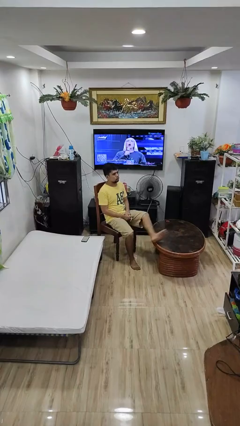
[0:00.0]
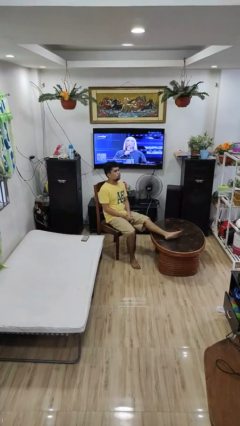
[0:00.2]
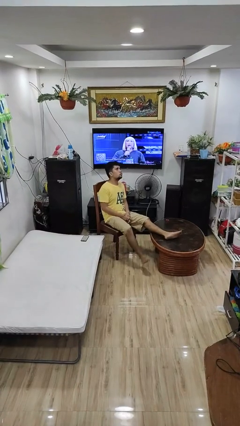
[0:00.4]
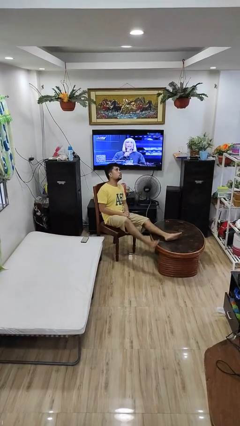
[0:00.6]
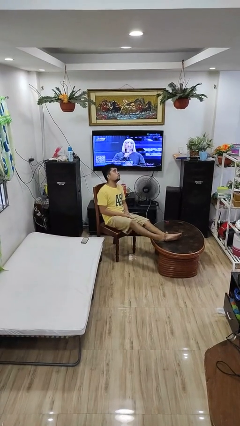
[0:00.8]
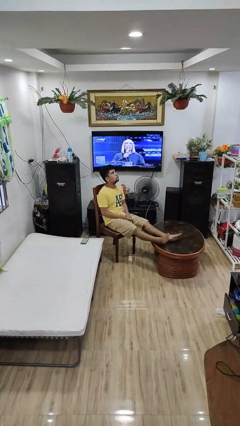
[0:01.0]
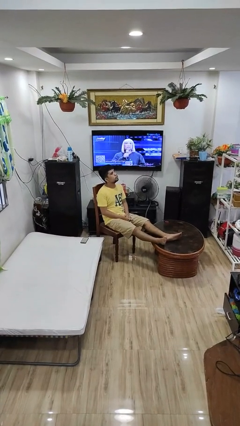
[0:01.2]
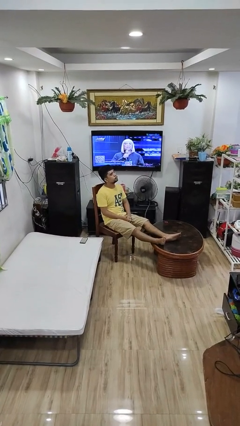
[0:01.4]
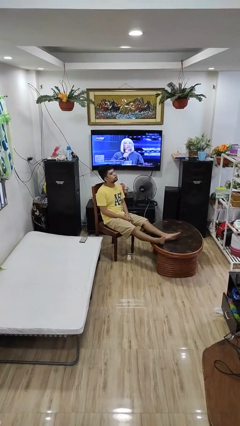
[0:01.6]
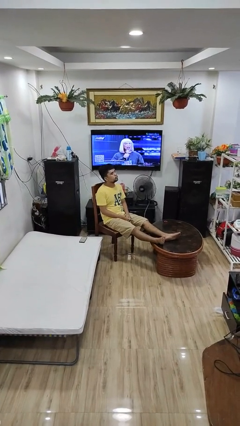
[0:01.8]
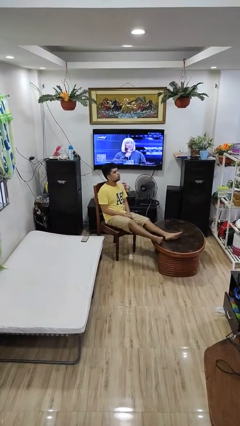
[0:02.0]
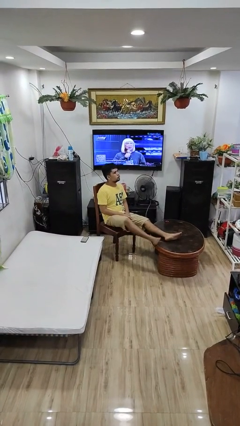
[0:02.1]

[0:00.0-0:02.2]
person puts feet up

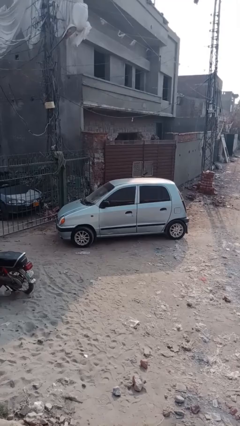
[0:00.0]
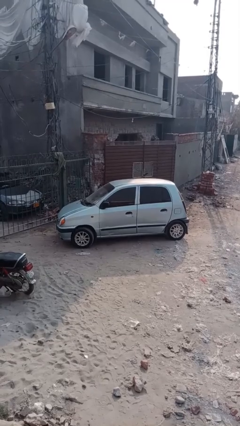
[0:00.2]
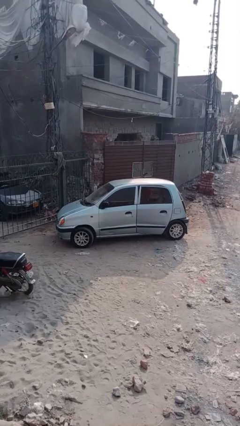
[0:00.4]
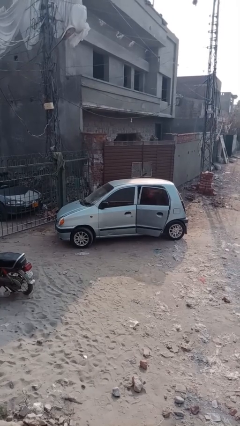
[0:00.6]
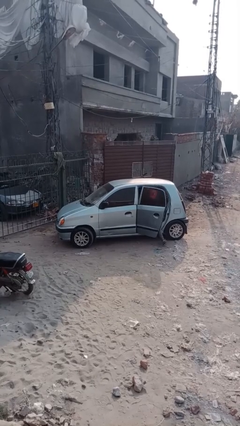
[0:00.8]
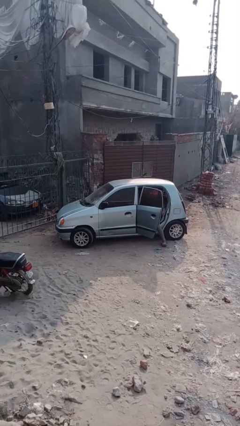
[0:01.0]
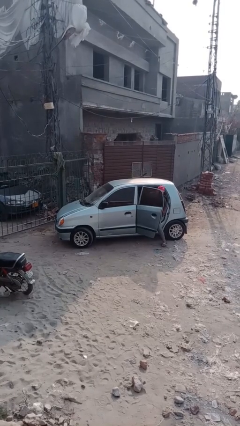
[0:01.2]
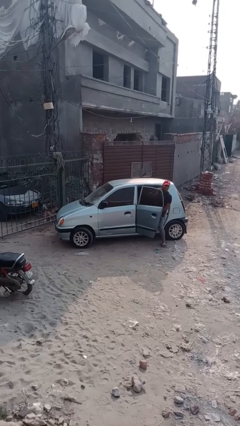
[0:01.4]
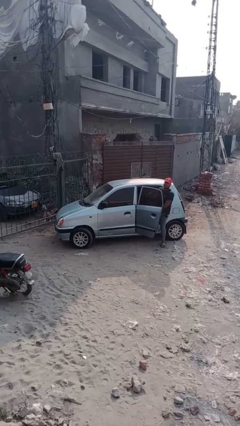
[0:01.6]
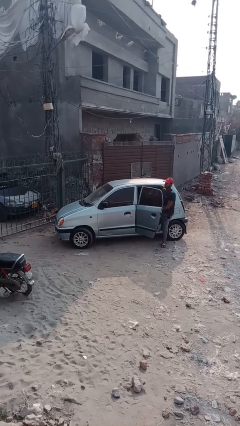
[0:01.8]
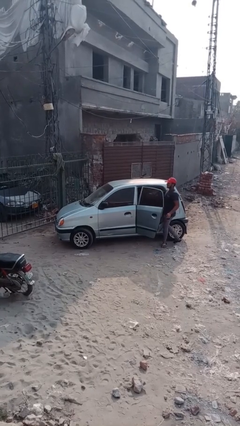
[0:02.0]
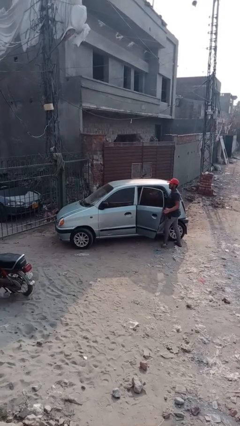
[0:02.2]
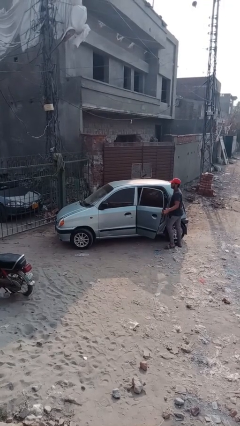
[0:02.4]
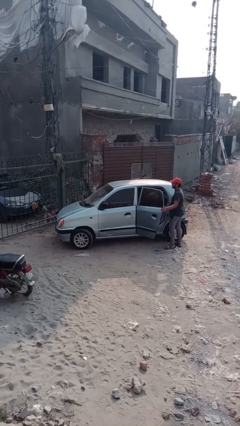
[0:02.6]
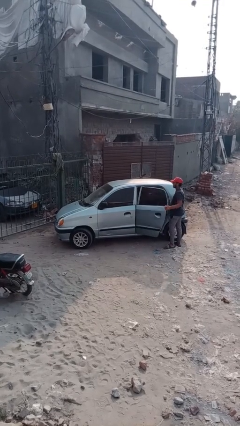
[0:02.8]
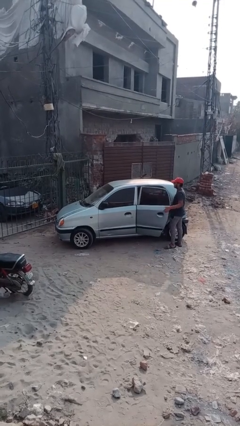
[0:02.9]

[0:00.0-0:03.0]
car drops off person

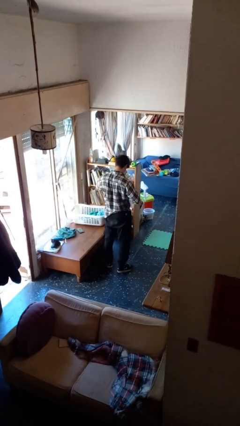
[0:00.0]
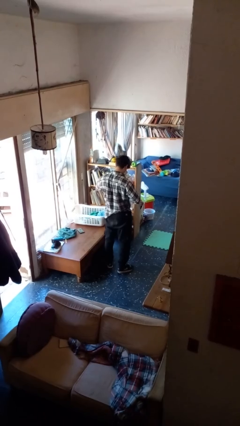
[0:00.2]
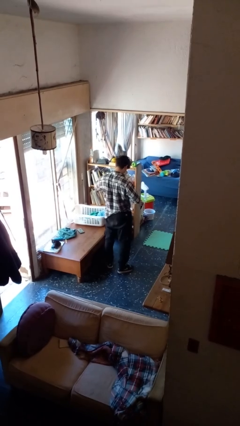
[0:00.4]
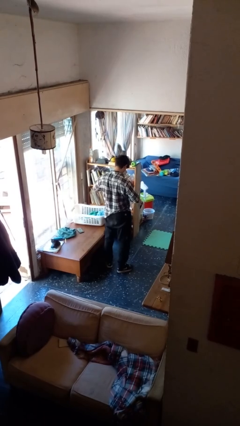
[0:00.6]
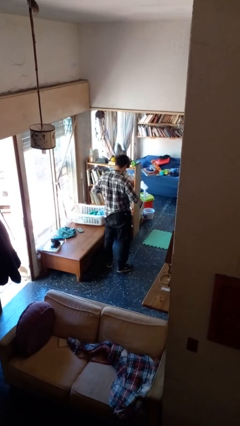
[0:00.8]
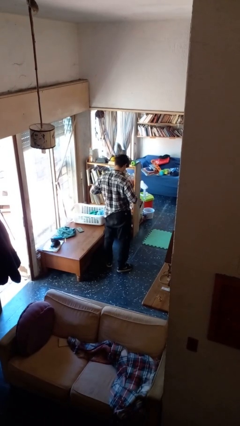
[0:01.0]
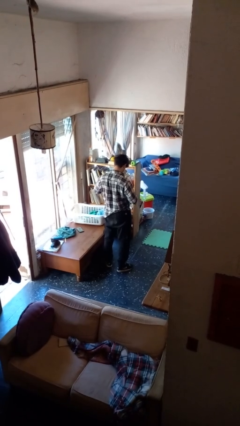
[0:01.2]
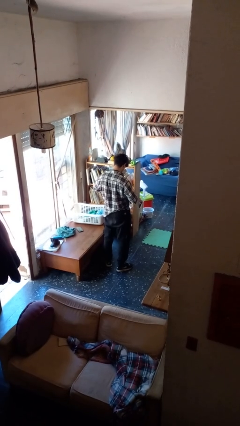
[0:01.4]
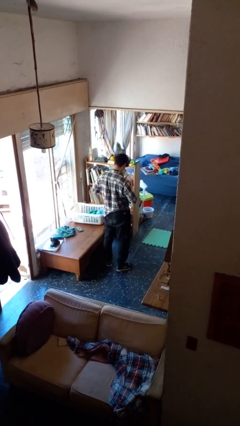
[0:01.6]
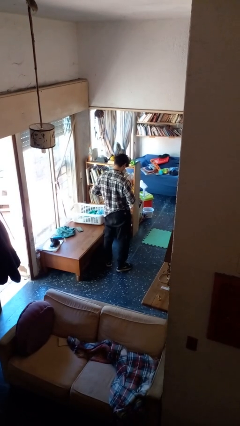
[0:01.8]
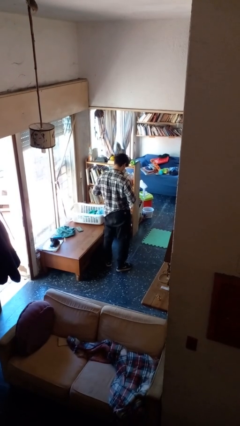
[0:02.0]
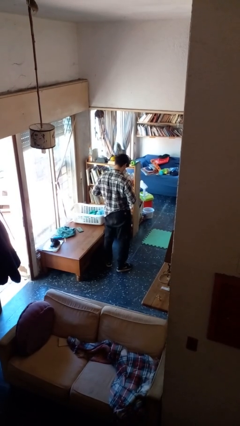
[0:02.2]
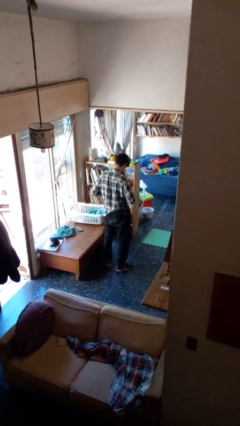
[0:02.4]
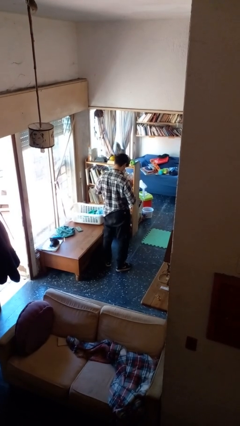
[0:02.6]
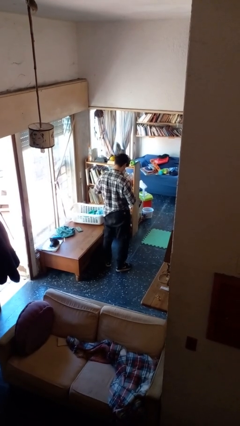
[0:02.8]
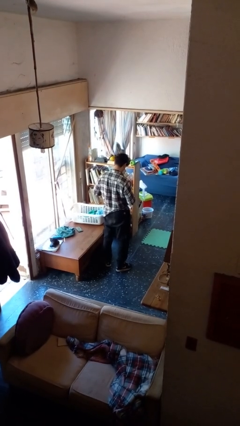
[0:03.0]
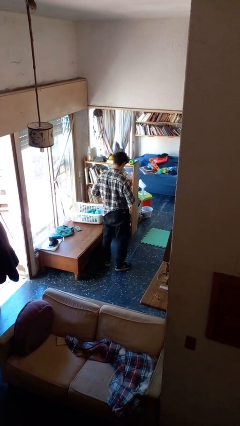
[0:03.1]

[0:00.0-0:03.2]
person unbuttons shirt

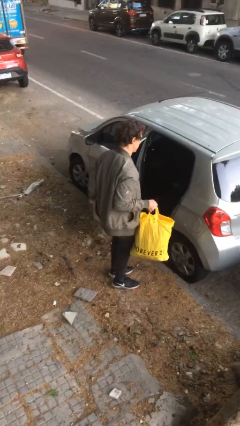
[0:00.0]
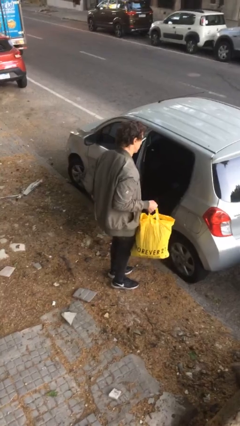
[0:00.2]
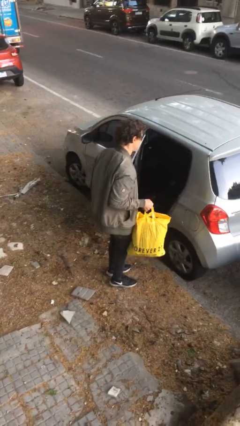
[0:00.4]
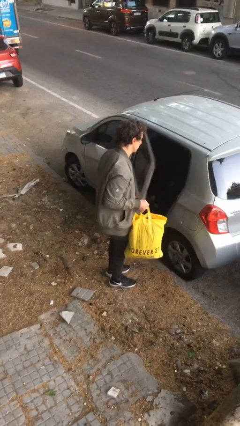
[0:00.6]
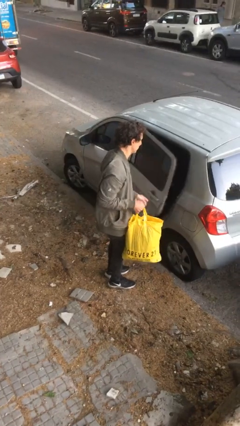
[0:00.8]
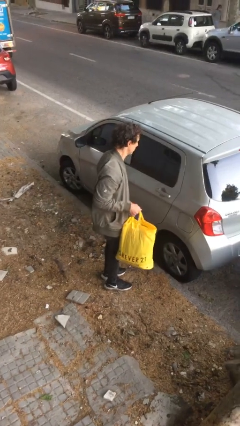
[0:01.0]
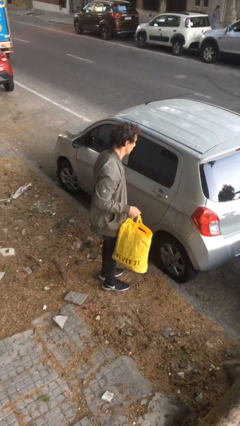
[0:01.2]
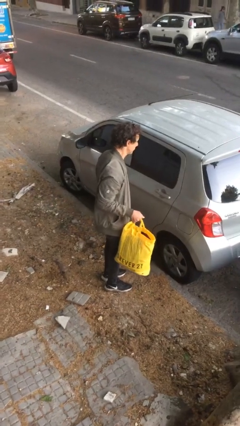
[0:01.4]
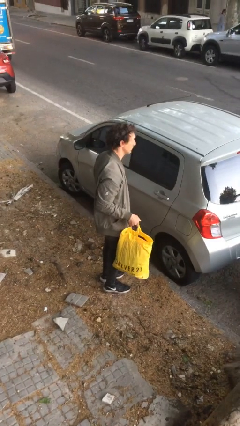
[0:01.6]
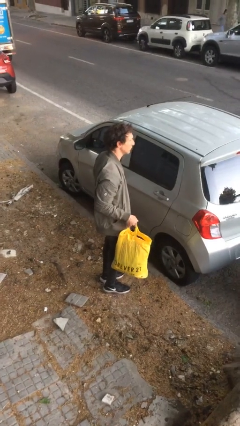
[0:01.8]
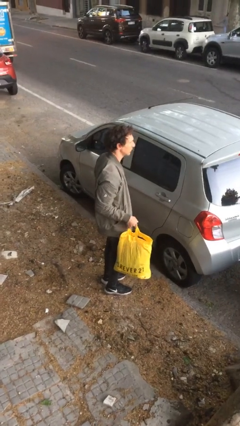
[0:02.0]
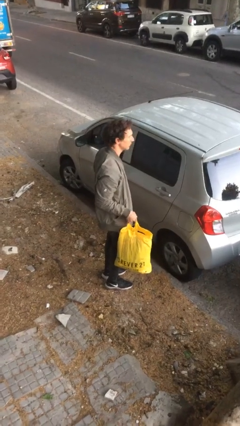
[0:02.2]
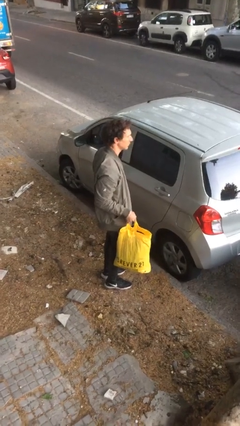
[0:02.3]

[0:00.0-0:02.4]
person closes car door

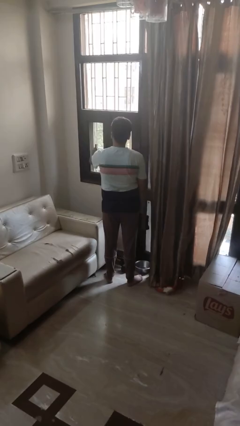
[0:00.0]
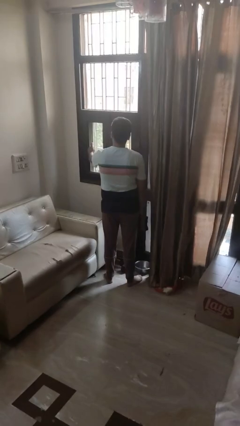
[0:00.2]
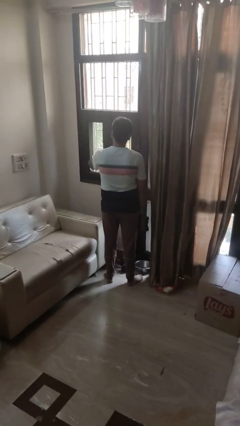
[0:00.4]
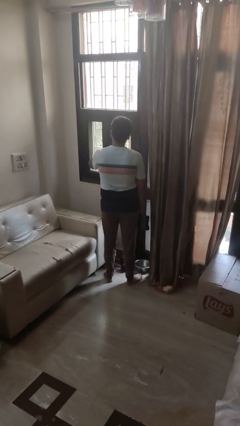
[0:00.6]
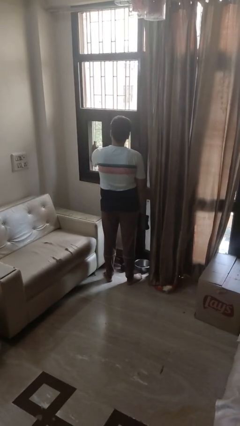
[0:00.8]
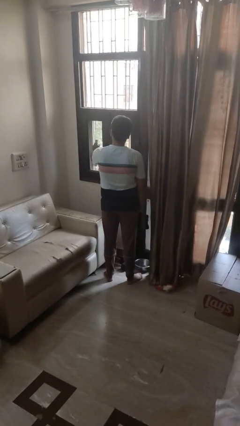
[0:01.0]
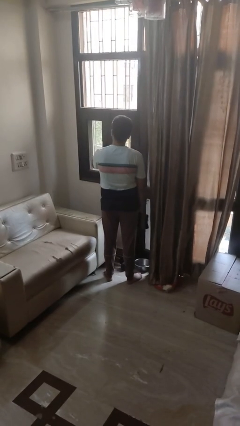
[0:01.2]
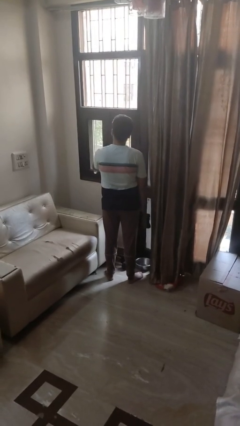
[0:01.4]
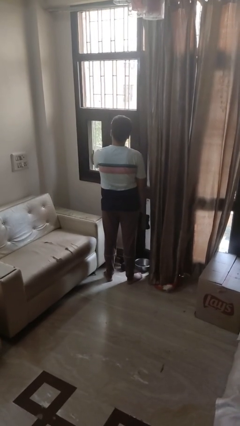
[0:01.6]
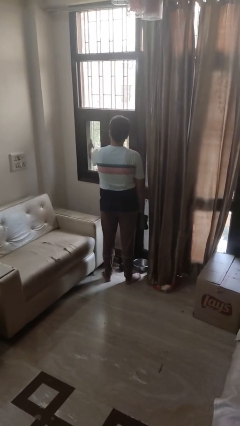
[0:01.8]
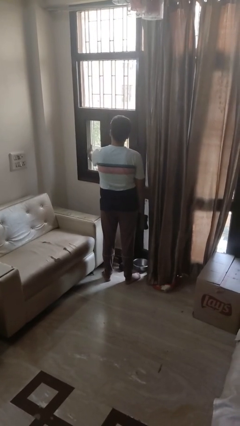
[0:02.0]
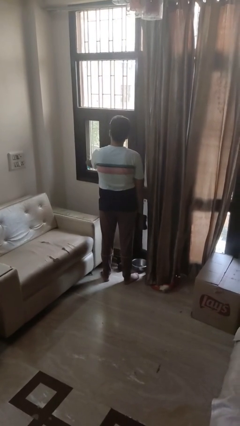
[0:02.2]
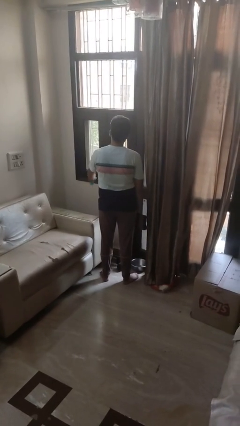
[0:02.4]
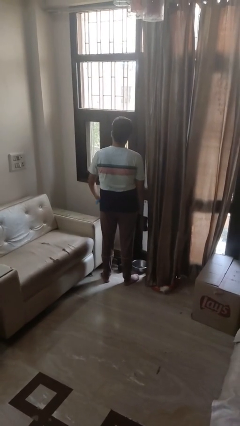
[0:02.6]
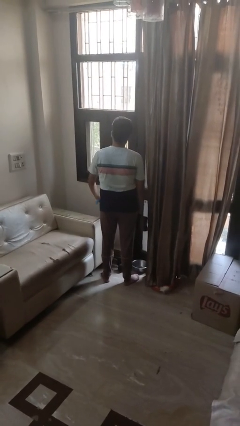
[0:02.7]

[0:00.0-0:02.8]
person sprays from bottle

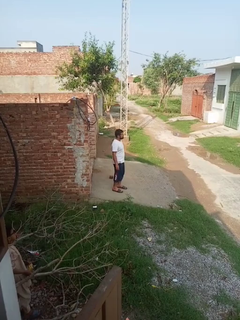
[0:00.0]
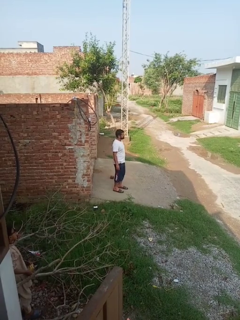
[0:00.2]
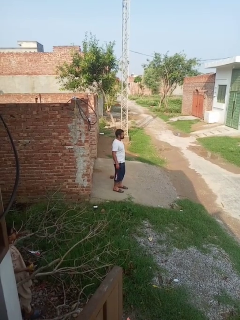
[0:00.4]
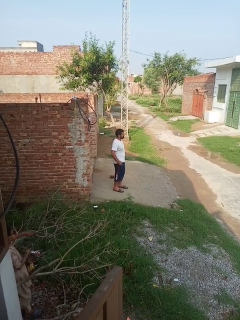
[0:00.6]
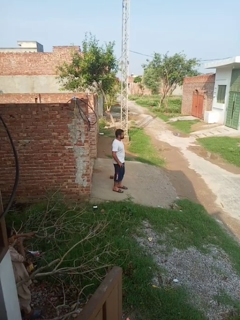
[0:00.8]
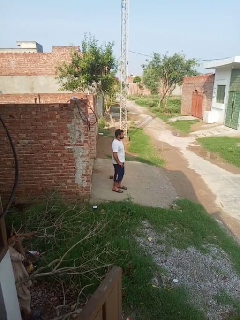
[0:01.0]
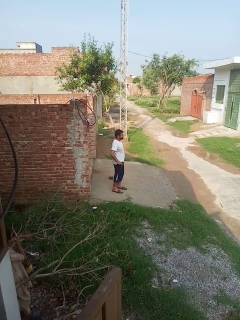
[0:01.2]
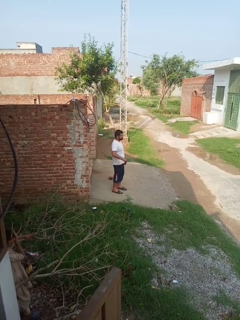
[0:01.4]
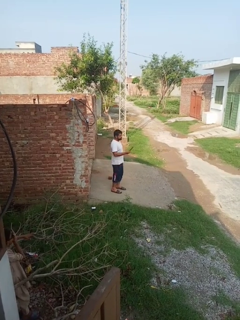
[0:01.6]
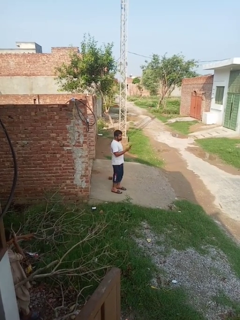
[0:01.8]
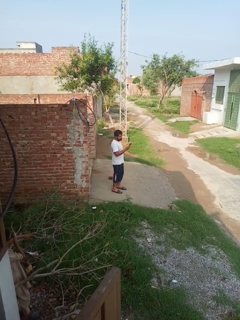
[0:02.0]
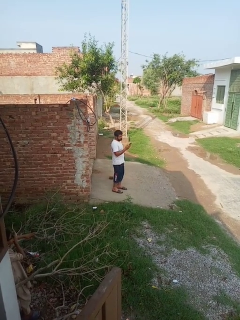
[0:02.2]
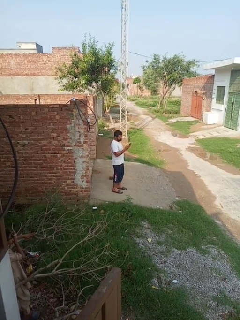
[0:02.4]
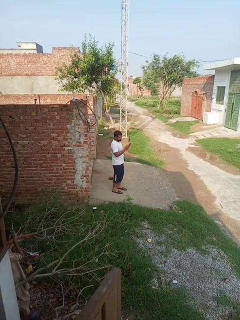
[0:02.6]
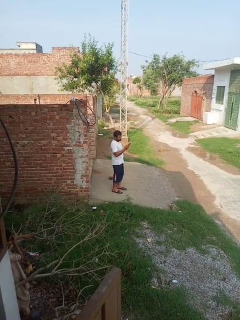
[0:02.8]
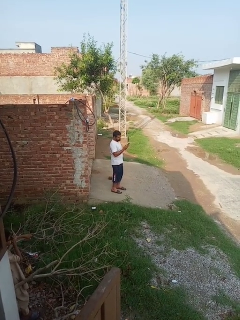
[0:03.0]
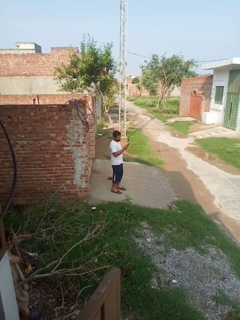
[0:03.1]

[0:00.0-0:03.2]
person takes phone from pocket

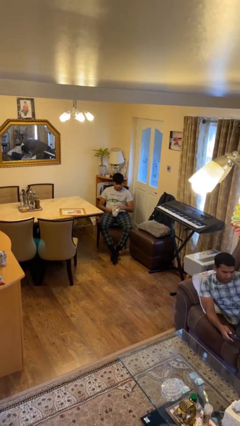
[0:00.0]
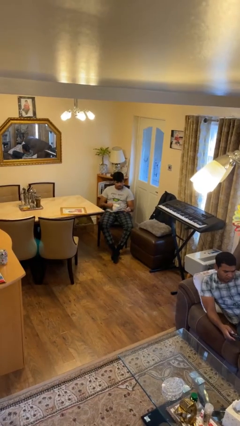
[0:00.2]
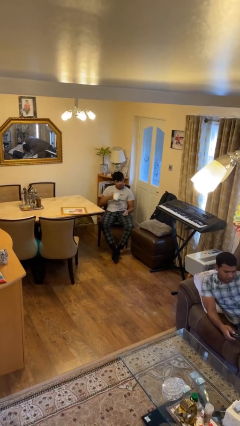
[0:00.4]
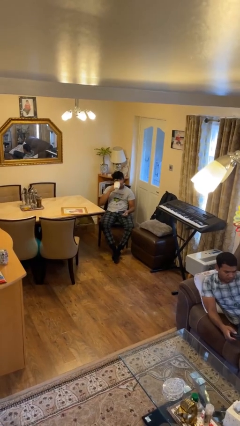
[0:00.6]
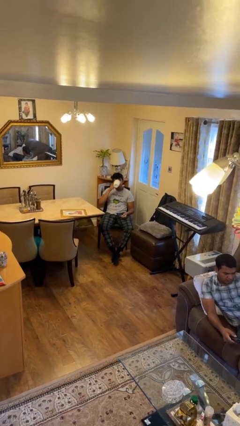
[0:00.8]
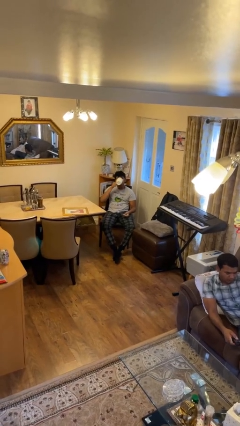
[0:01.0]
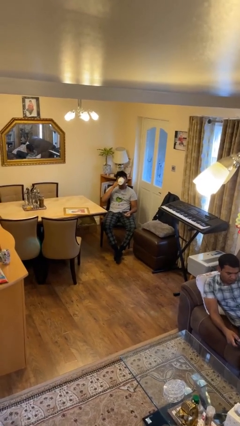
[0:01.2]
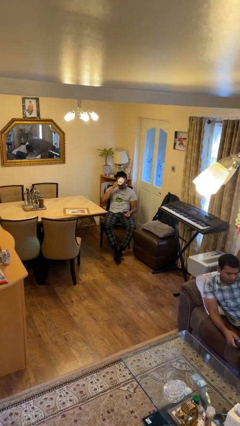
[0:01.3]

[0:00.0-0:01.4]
person drinks from mug
